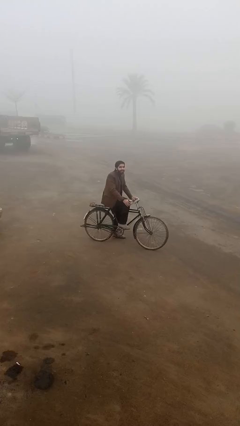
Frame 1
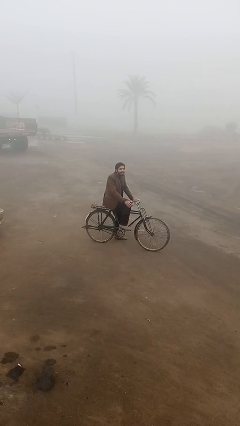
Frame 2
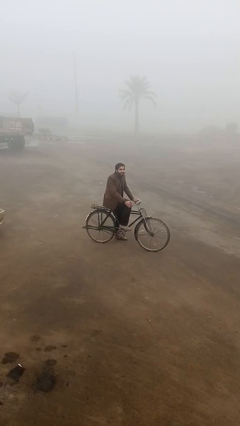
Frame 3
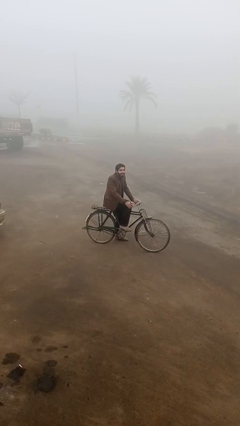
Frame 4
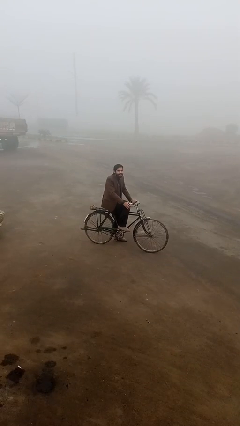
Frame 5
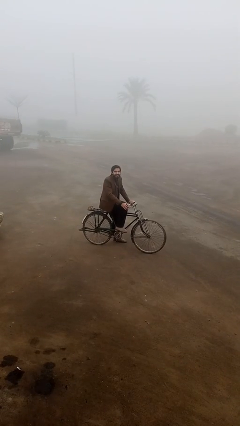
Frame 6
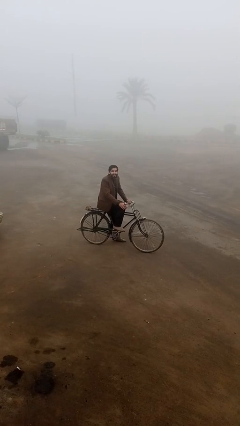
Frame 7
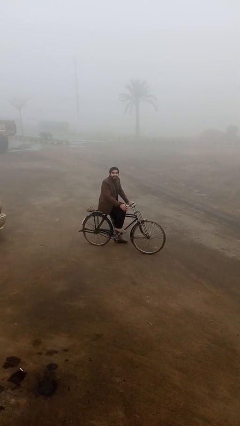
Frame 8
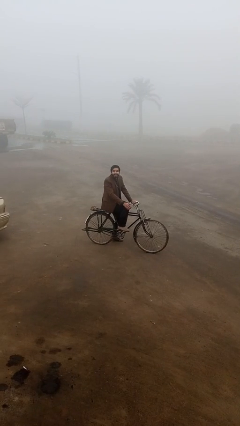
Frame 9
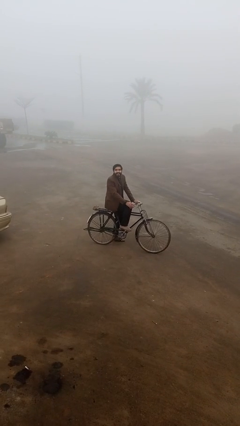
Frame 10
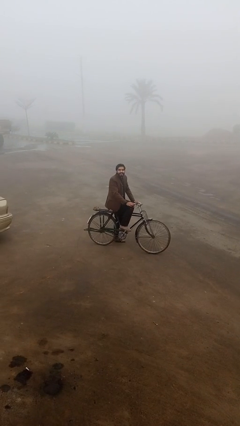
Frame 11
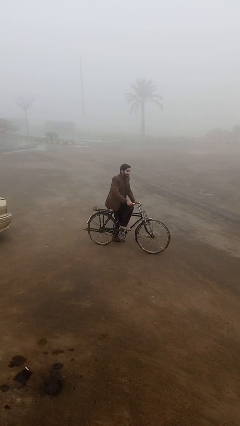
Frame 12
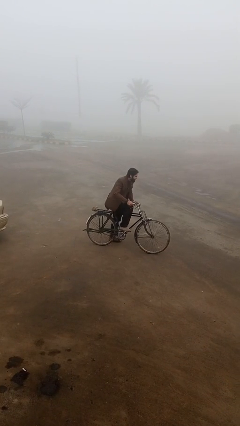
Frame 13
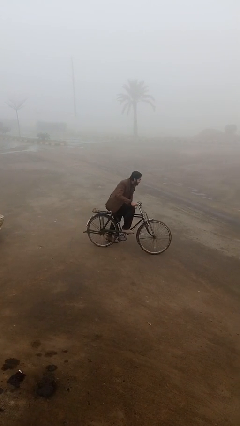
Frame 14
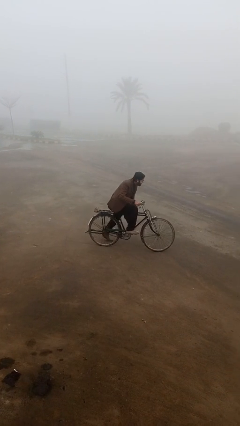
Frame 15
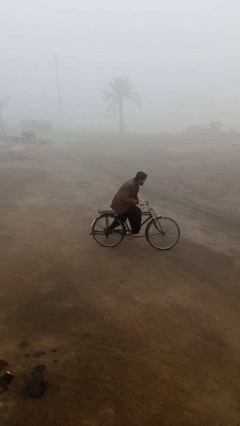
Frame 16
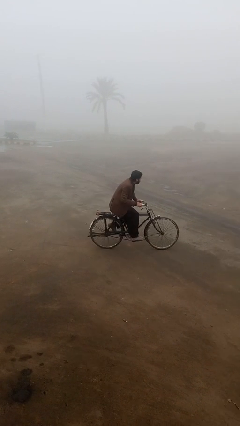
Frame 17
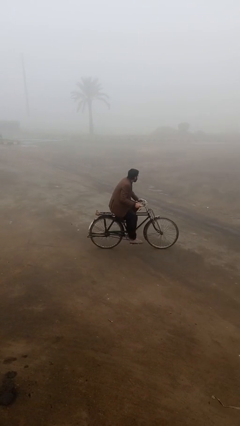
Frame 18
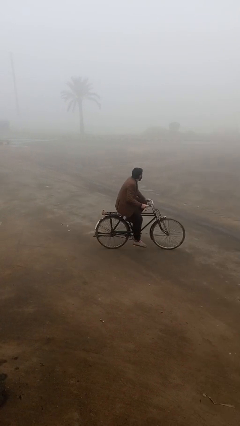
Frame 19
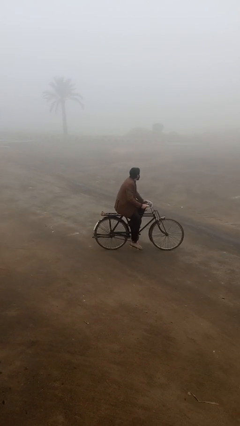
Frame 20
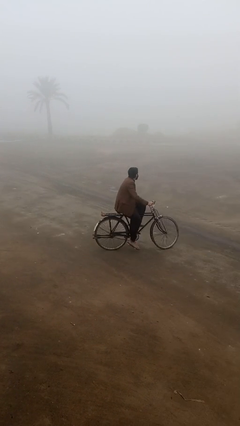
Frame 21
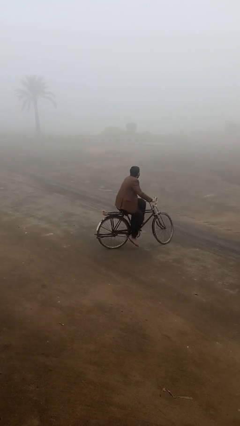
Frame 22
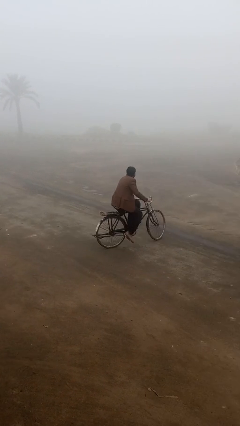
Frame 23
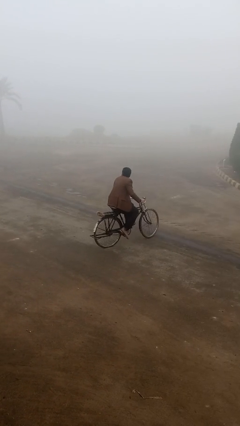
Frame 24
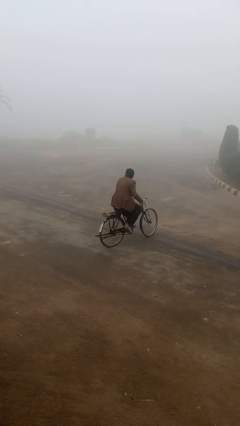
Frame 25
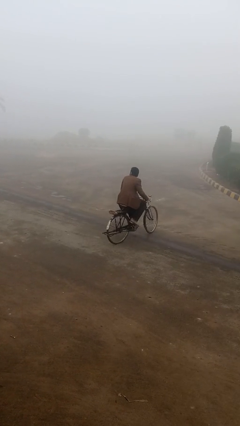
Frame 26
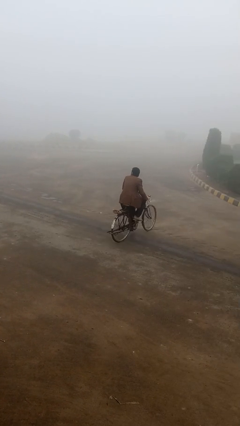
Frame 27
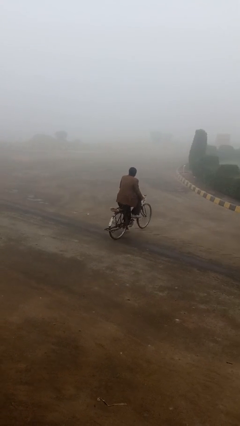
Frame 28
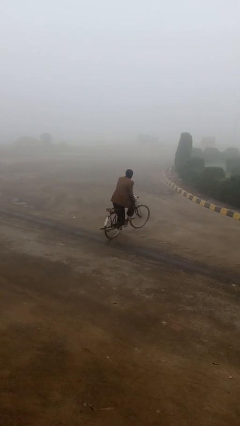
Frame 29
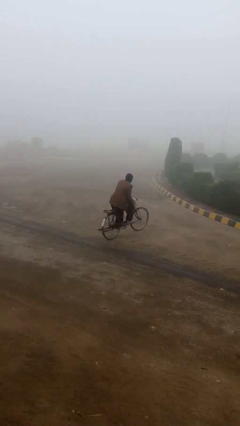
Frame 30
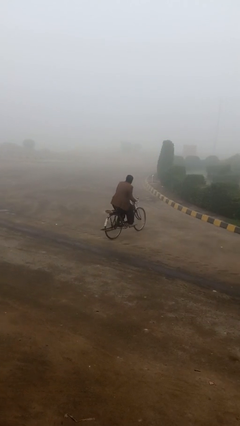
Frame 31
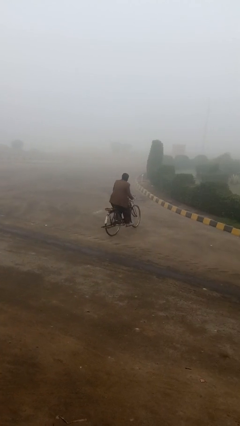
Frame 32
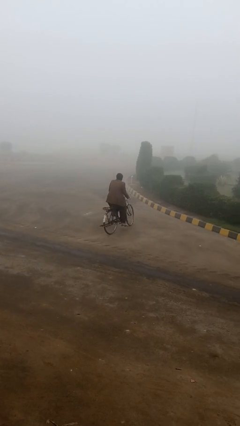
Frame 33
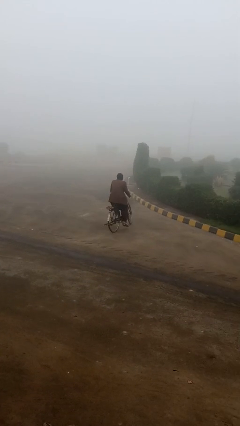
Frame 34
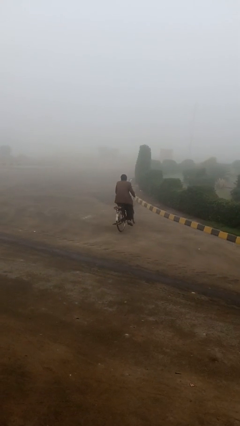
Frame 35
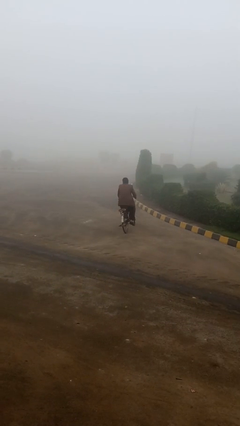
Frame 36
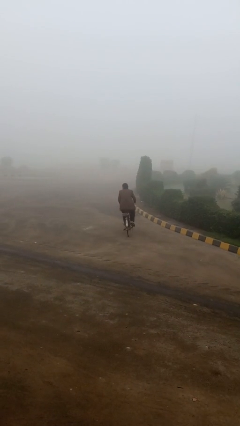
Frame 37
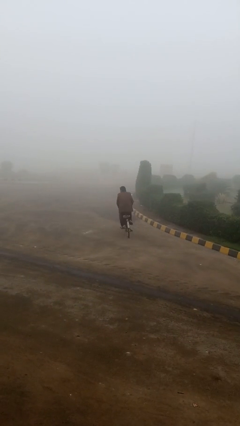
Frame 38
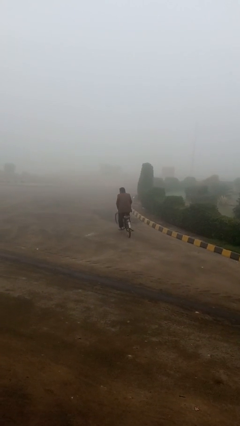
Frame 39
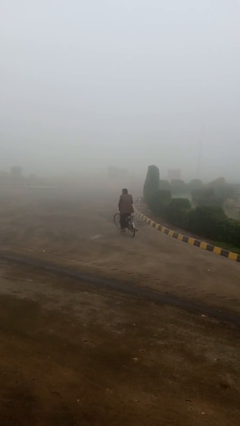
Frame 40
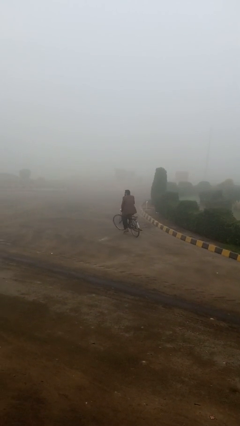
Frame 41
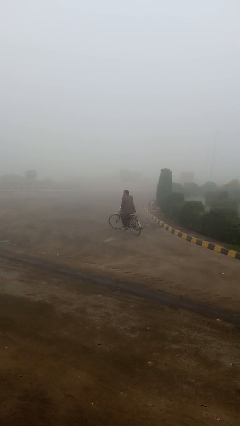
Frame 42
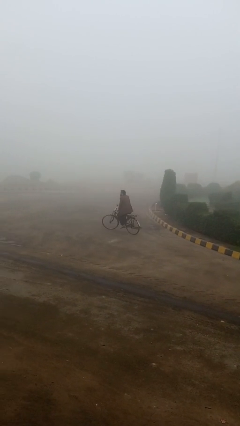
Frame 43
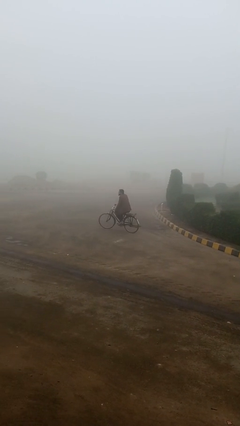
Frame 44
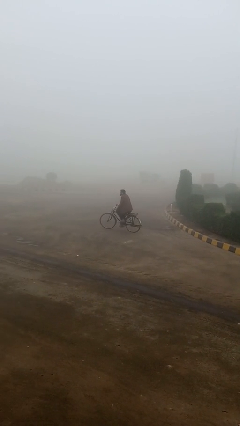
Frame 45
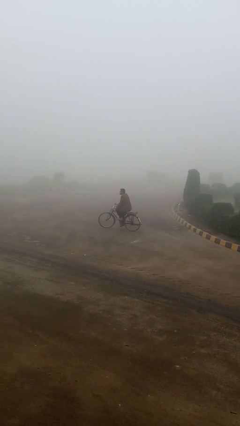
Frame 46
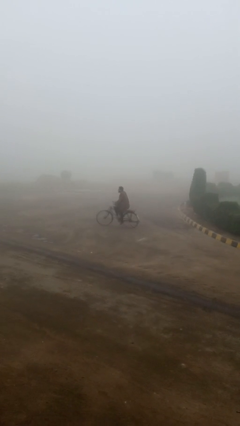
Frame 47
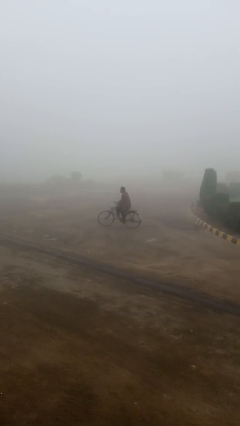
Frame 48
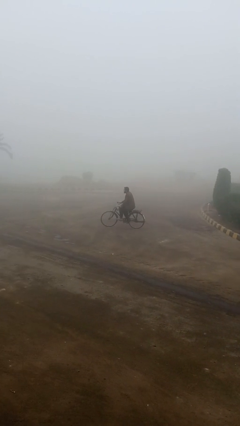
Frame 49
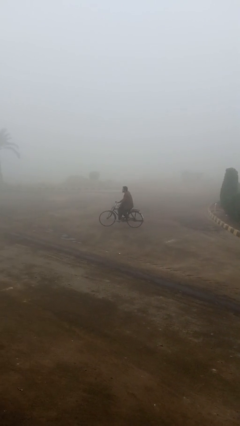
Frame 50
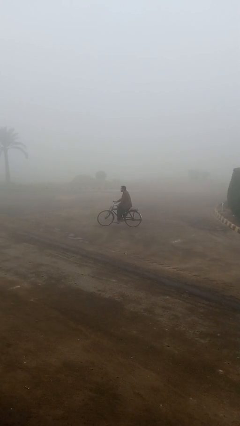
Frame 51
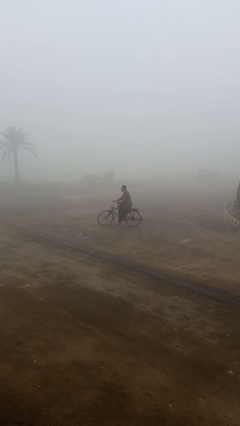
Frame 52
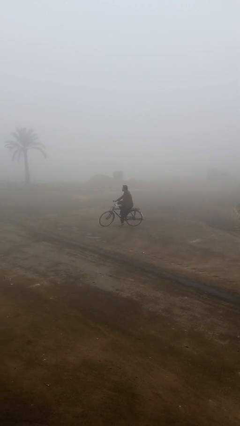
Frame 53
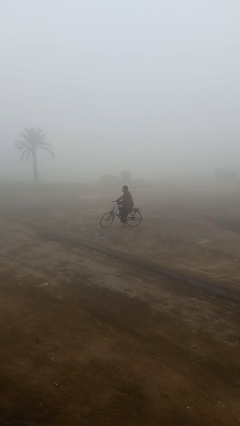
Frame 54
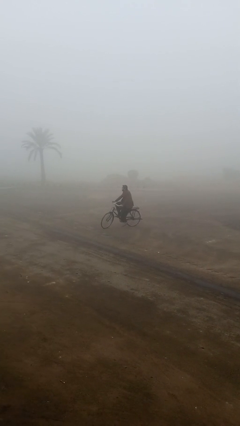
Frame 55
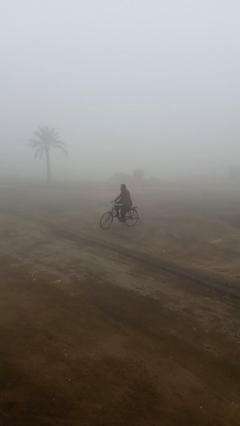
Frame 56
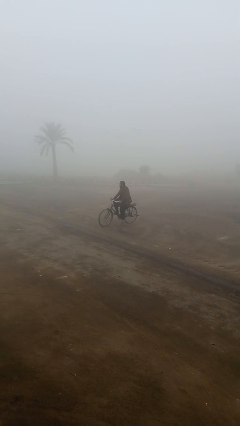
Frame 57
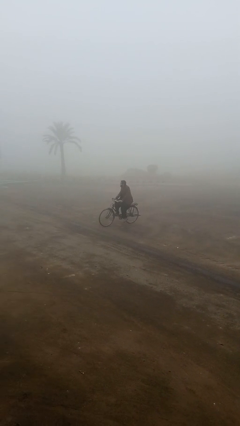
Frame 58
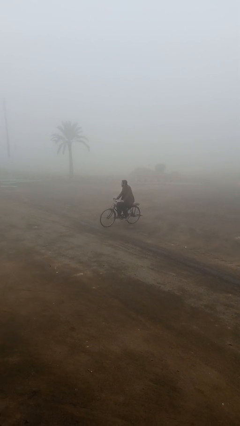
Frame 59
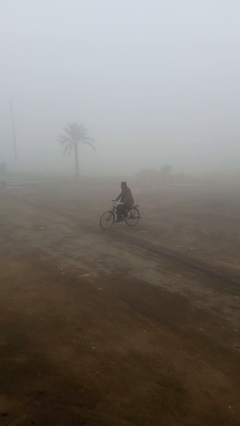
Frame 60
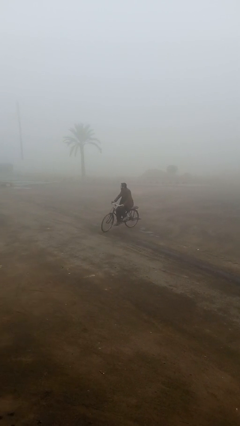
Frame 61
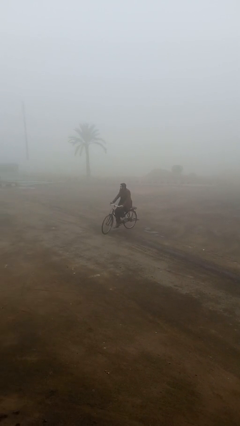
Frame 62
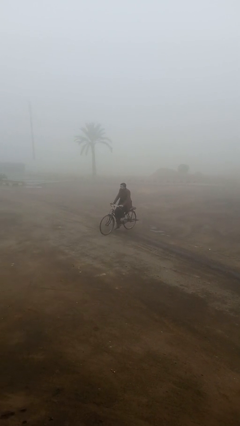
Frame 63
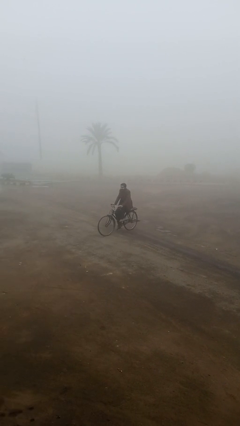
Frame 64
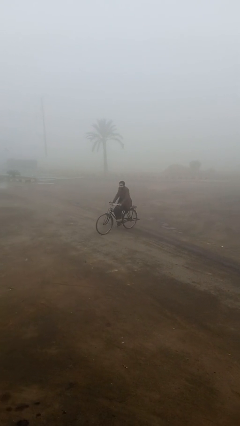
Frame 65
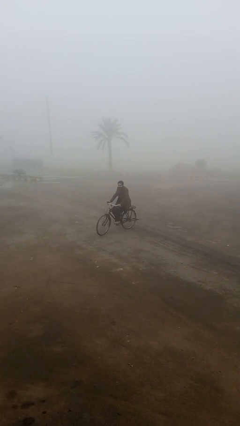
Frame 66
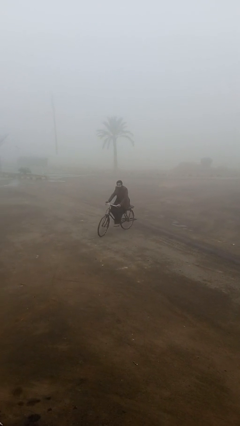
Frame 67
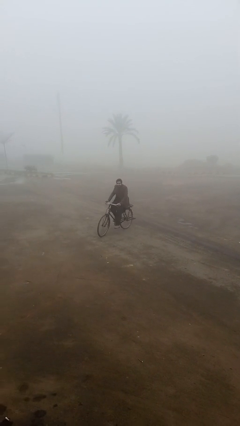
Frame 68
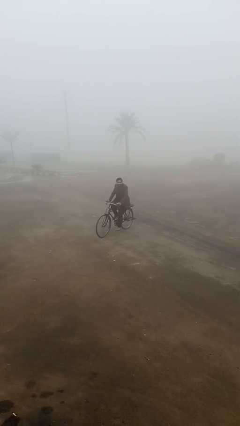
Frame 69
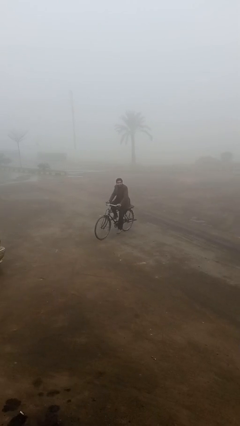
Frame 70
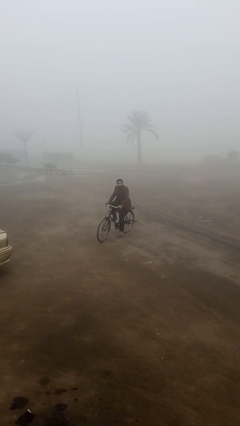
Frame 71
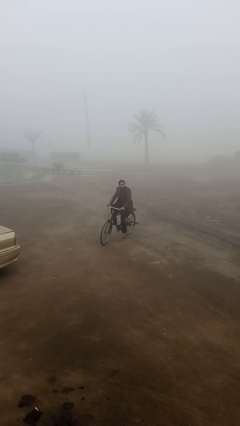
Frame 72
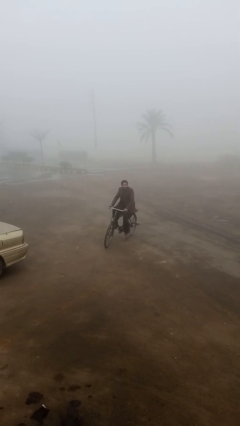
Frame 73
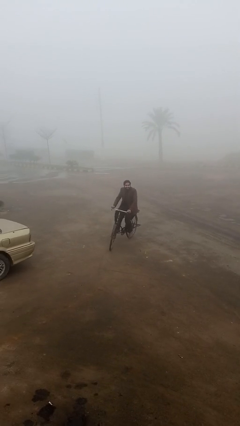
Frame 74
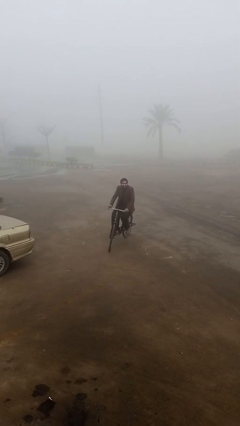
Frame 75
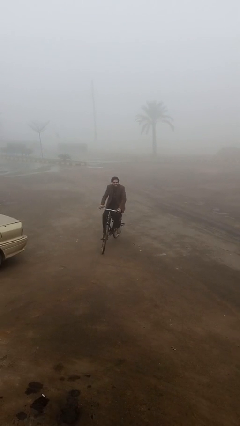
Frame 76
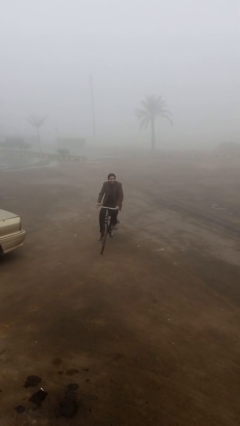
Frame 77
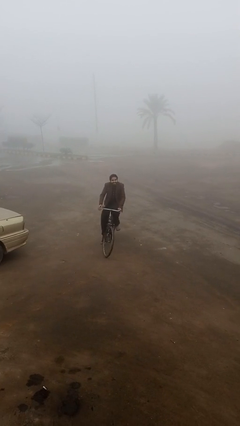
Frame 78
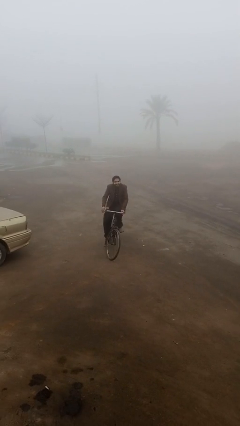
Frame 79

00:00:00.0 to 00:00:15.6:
person rides bicycle

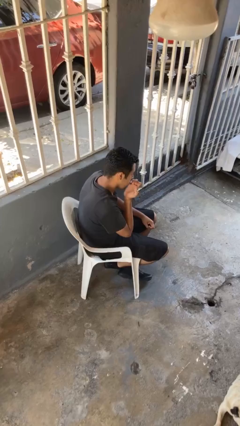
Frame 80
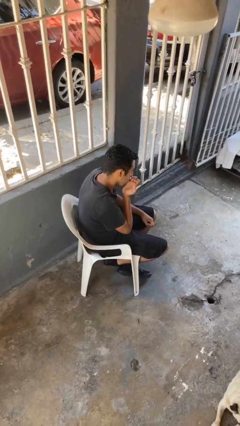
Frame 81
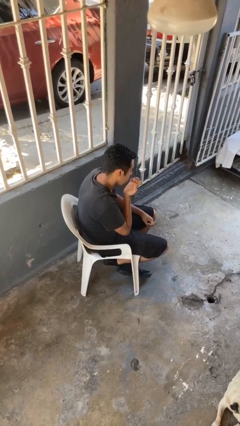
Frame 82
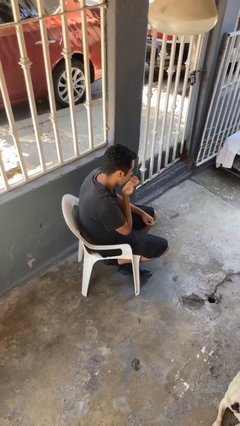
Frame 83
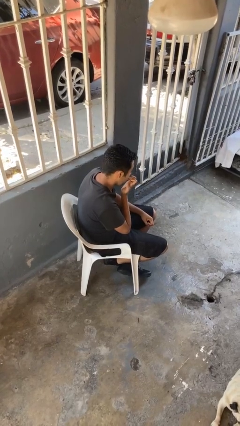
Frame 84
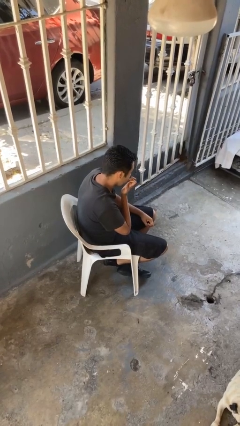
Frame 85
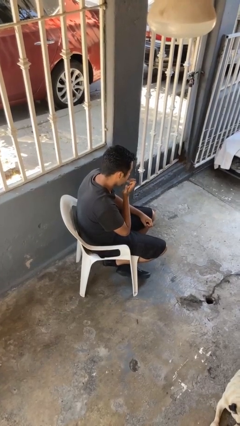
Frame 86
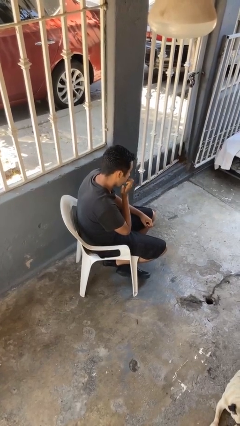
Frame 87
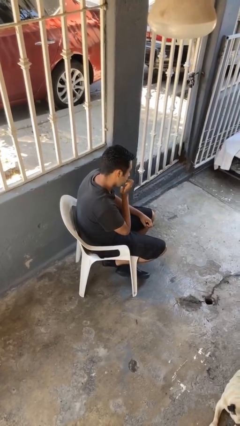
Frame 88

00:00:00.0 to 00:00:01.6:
person licks fingers

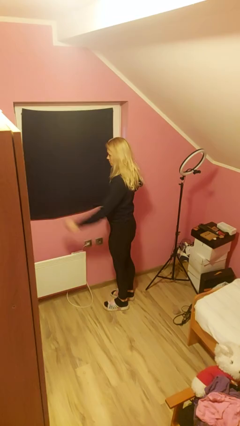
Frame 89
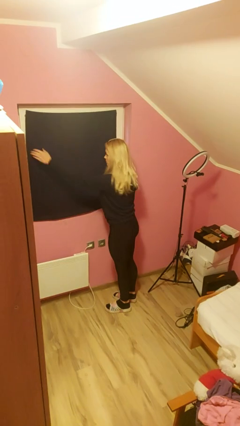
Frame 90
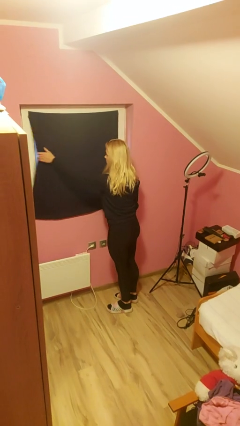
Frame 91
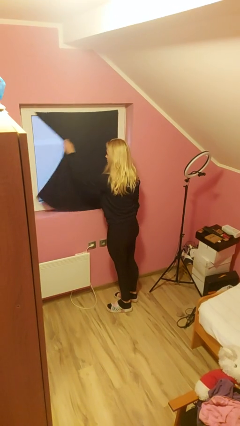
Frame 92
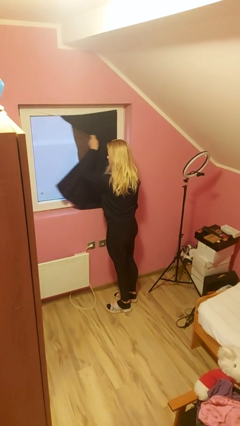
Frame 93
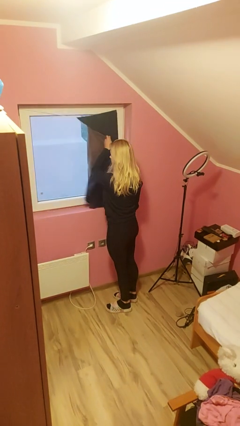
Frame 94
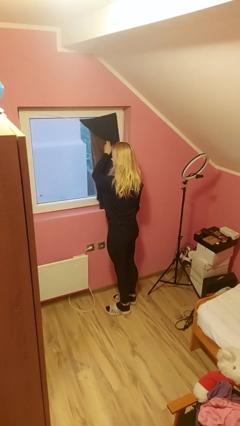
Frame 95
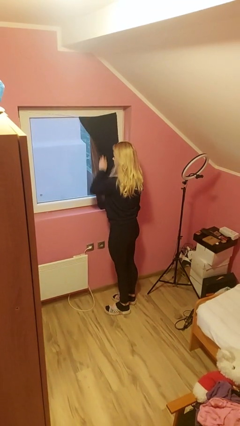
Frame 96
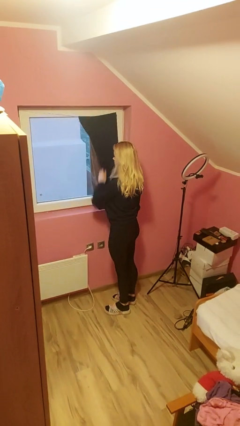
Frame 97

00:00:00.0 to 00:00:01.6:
person opens curtains
